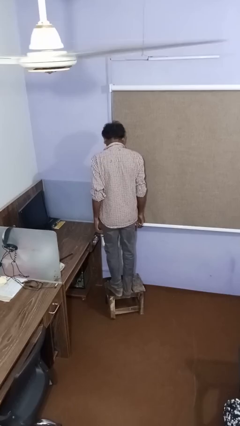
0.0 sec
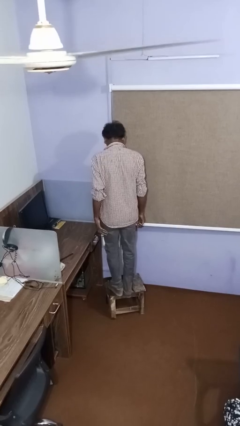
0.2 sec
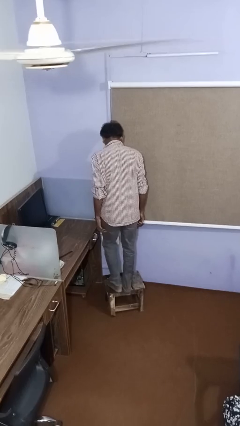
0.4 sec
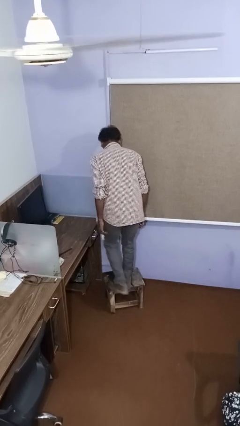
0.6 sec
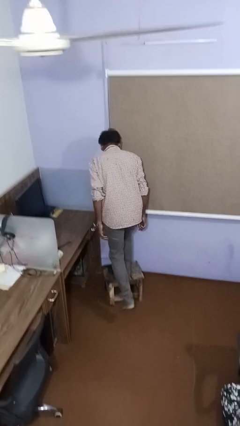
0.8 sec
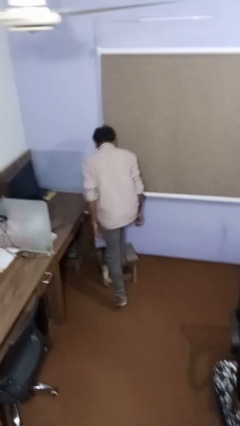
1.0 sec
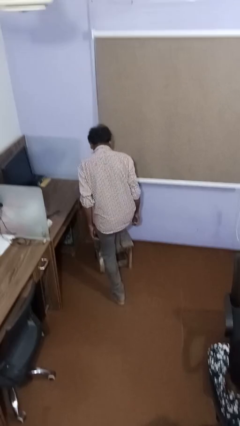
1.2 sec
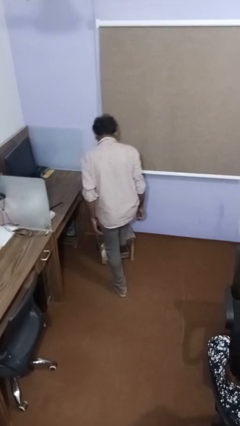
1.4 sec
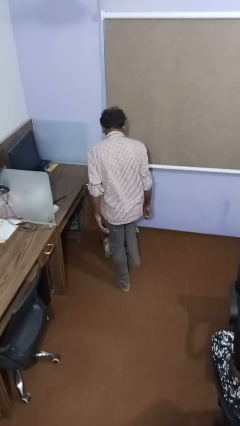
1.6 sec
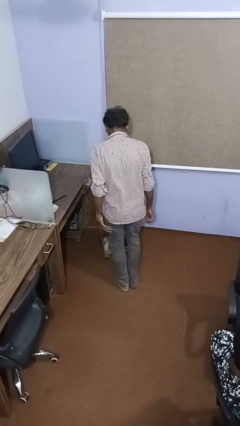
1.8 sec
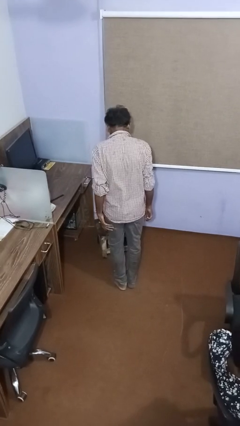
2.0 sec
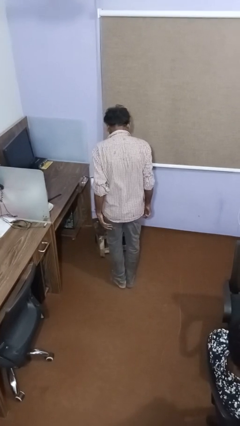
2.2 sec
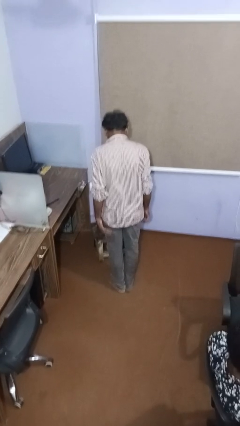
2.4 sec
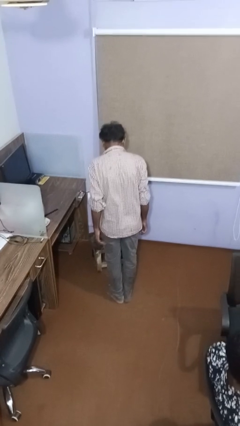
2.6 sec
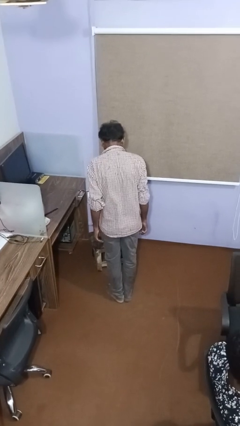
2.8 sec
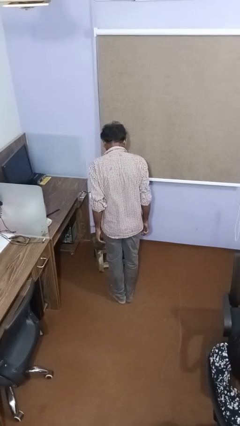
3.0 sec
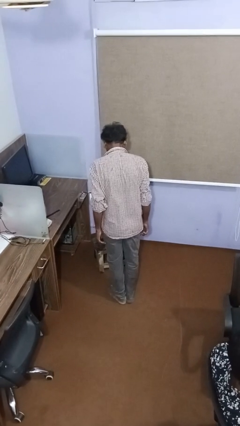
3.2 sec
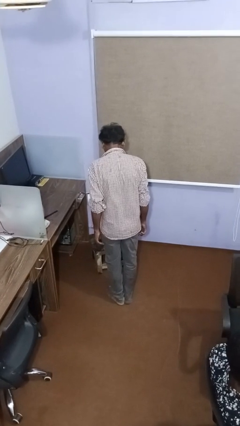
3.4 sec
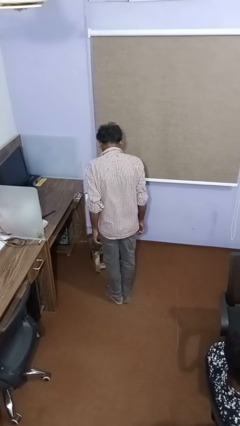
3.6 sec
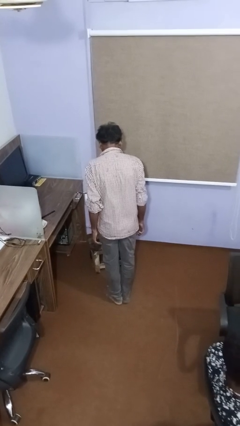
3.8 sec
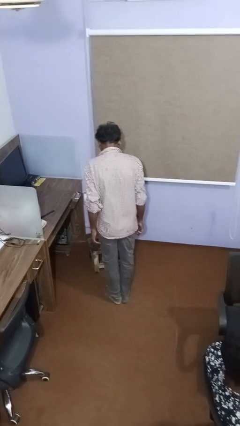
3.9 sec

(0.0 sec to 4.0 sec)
person climbs off table

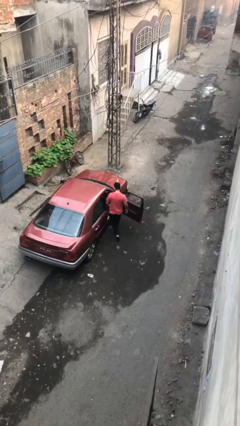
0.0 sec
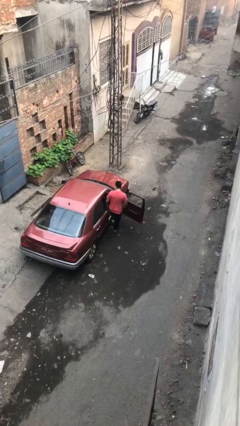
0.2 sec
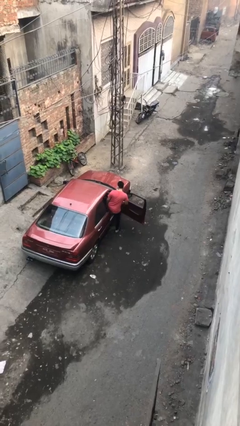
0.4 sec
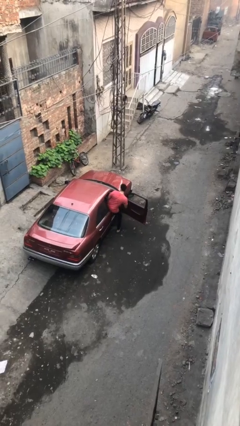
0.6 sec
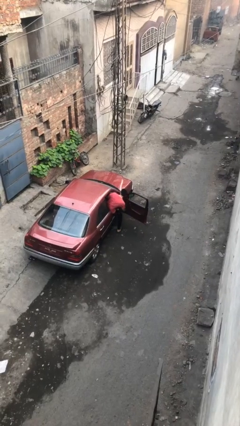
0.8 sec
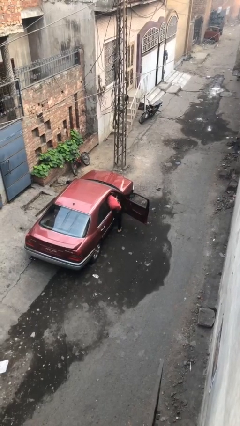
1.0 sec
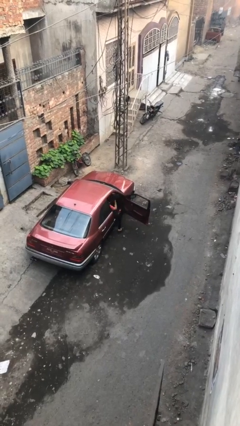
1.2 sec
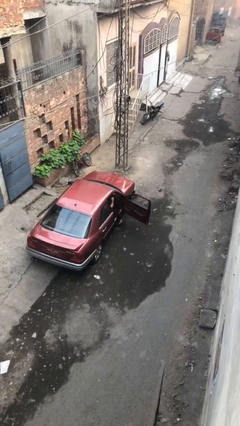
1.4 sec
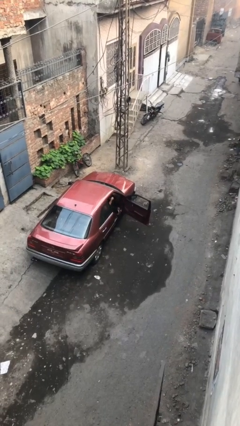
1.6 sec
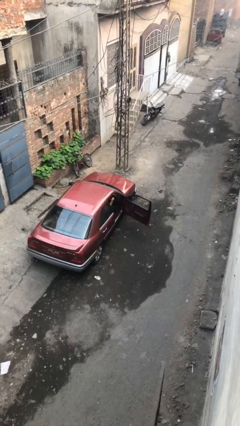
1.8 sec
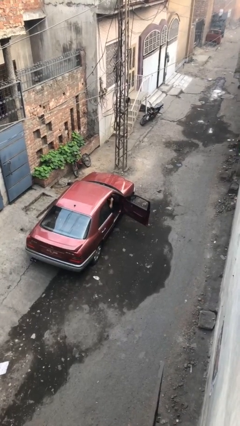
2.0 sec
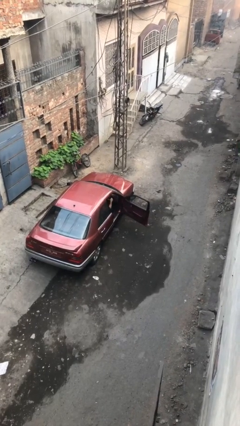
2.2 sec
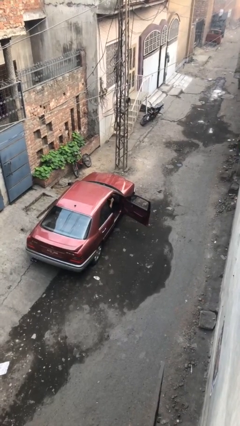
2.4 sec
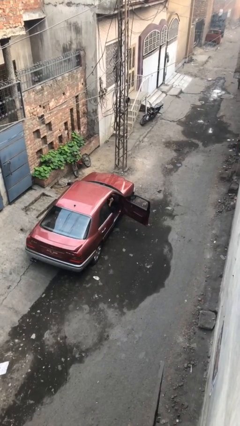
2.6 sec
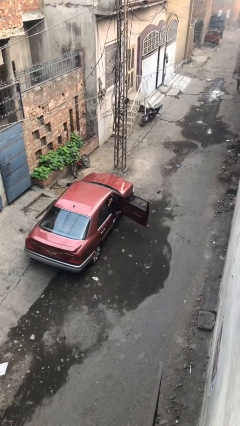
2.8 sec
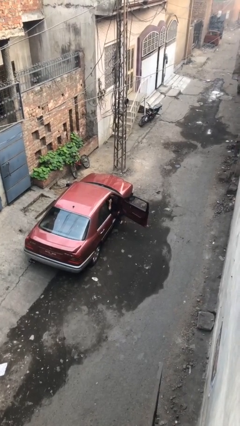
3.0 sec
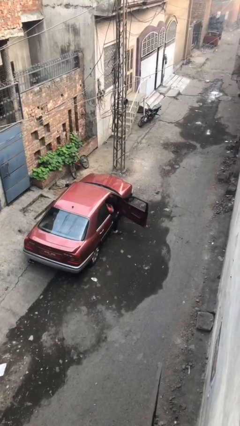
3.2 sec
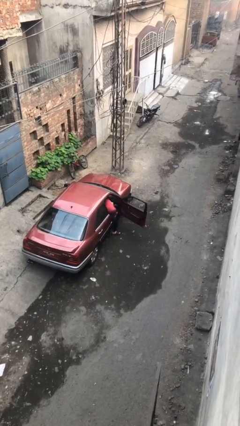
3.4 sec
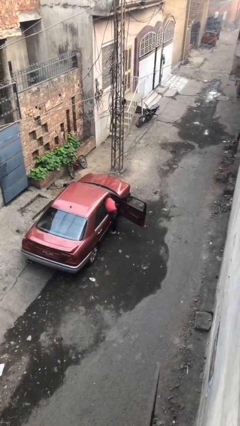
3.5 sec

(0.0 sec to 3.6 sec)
person enters car

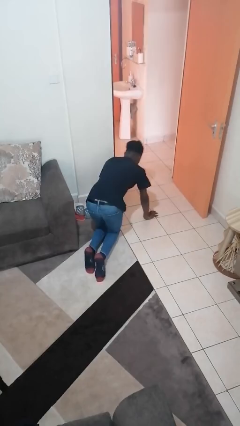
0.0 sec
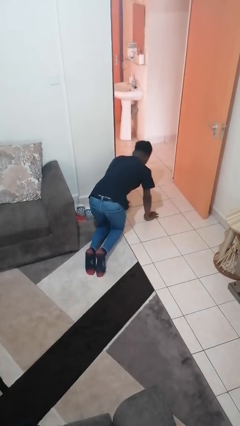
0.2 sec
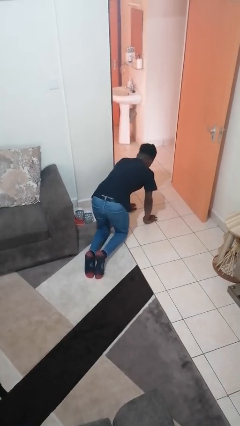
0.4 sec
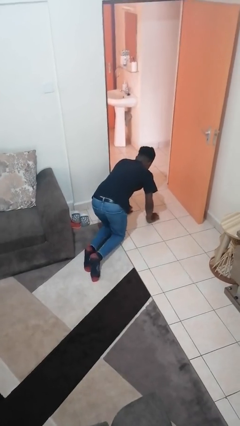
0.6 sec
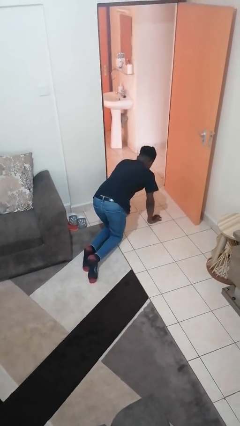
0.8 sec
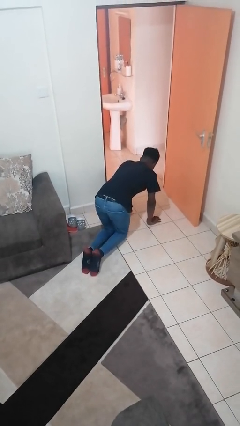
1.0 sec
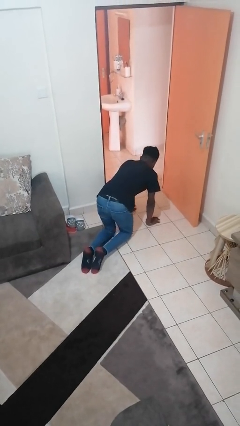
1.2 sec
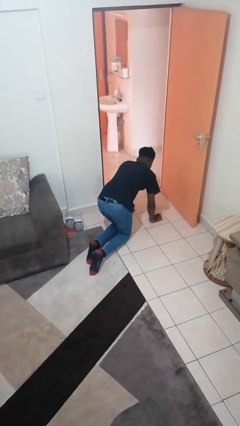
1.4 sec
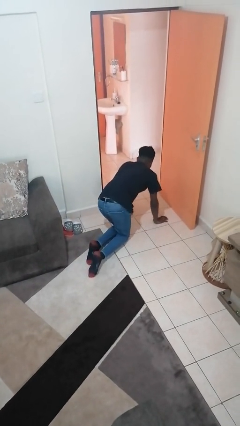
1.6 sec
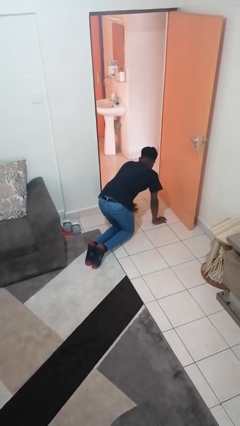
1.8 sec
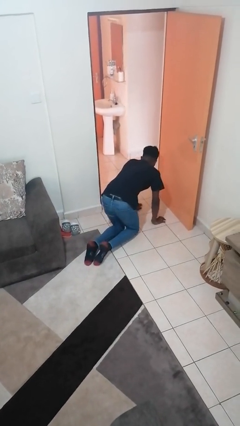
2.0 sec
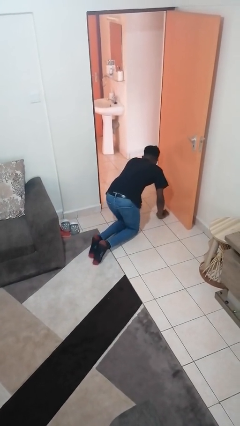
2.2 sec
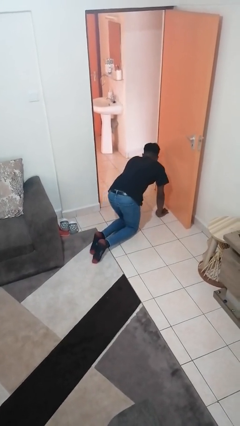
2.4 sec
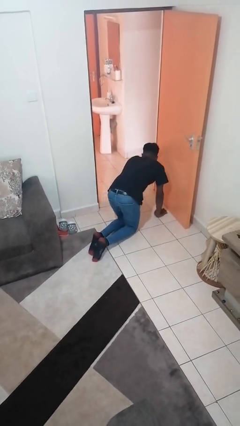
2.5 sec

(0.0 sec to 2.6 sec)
person crawls

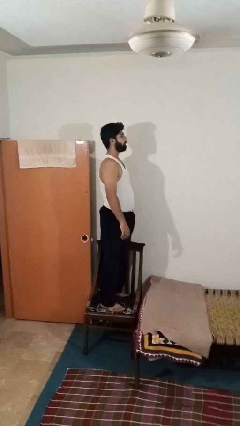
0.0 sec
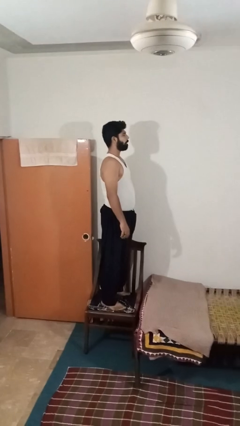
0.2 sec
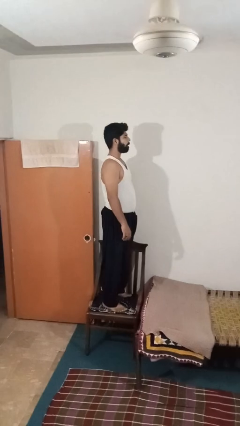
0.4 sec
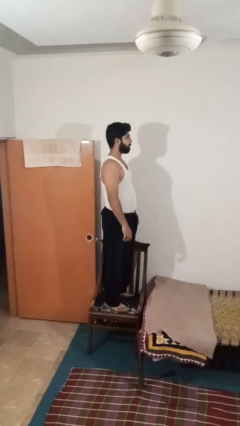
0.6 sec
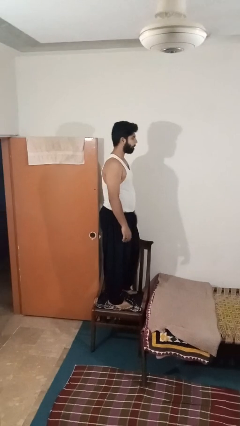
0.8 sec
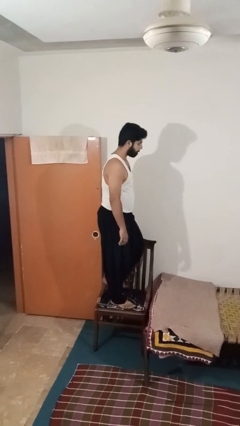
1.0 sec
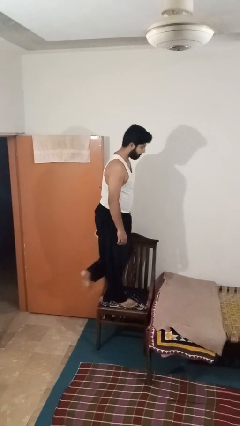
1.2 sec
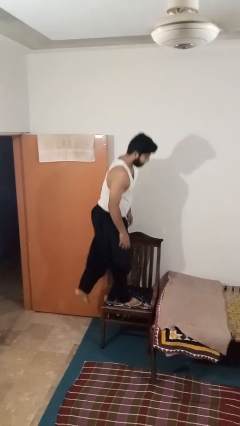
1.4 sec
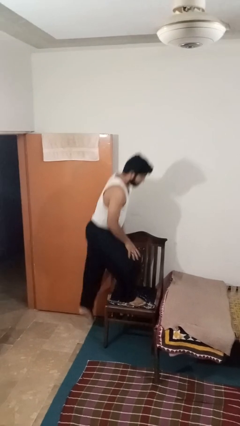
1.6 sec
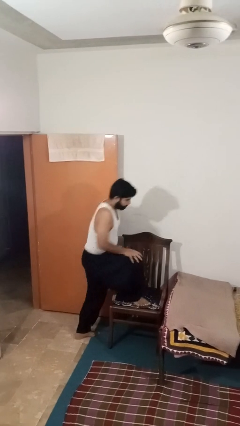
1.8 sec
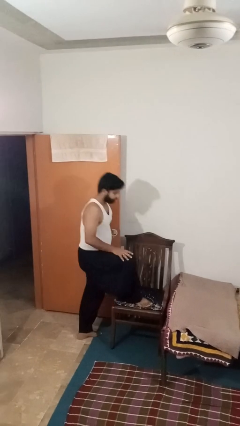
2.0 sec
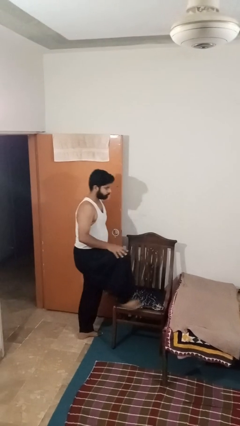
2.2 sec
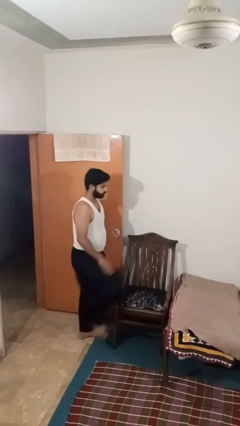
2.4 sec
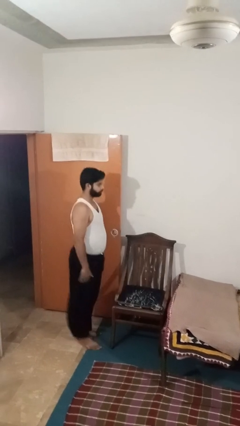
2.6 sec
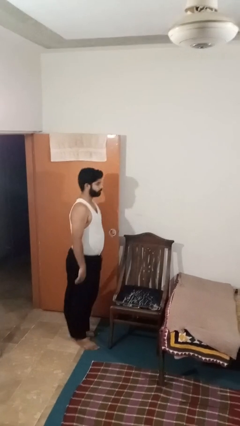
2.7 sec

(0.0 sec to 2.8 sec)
person climbs off chair

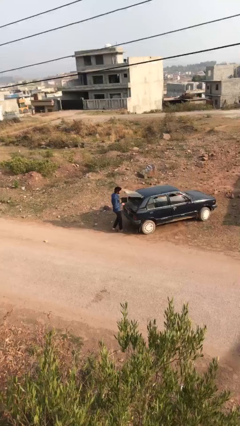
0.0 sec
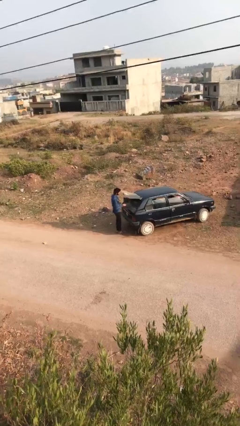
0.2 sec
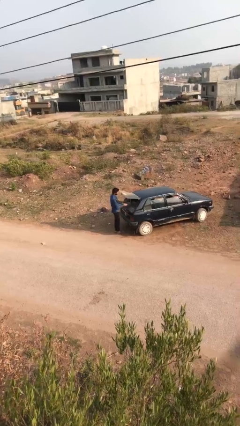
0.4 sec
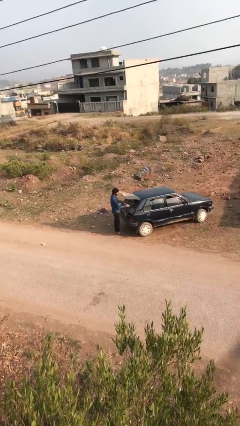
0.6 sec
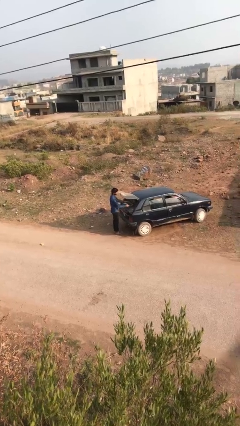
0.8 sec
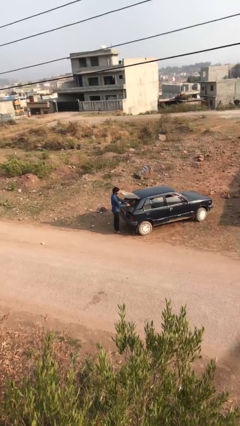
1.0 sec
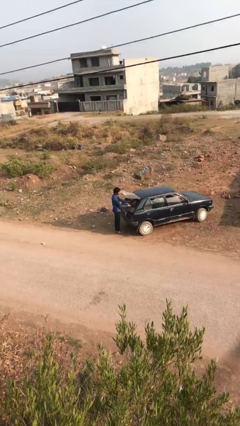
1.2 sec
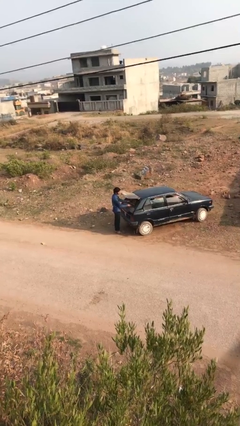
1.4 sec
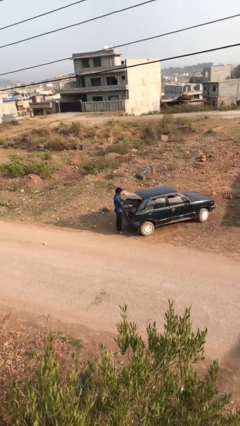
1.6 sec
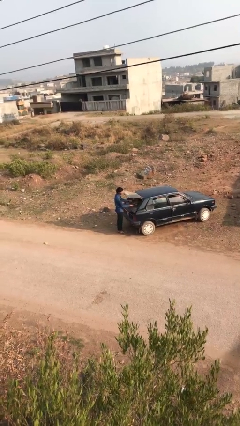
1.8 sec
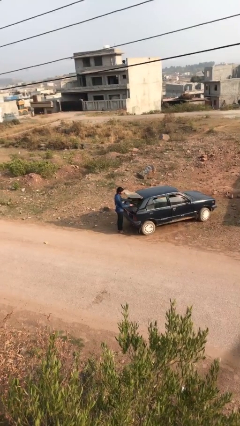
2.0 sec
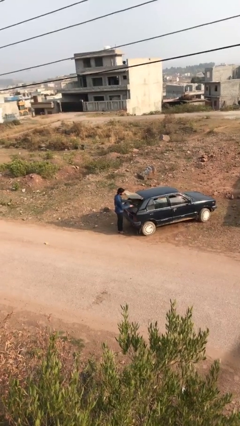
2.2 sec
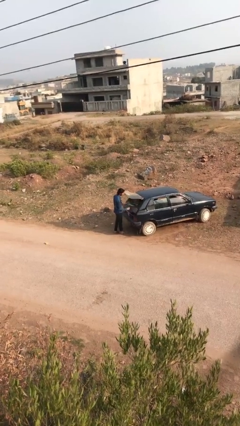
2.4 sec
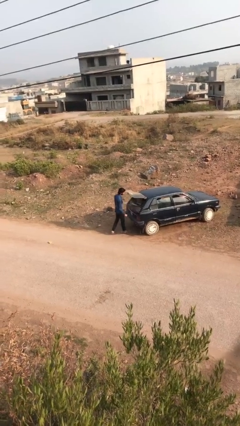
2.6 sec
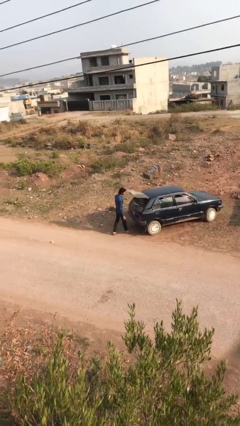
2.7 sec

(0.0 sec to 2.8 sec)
person loads car

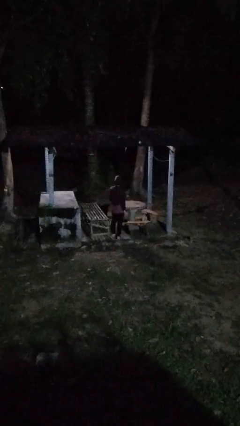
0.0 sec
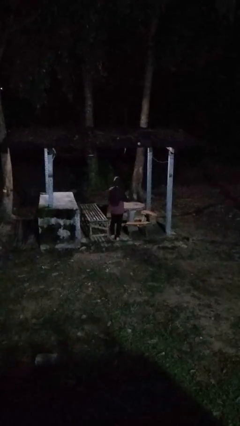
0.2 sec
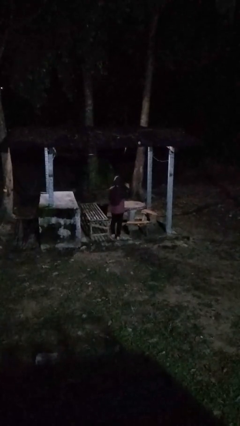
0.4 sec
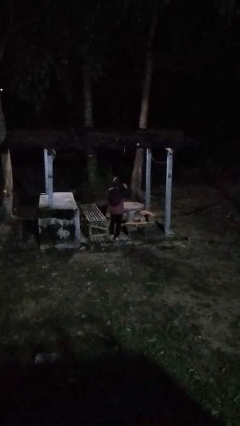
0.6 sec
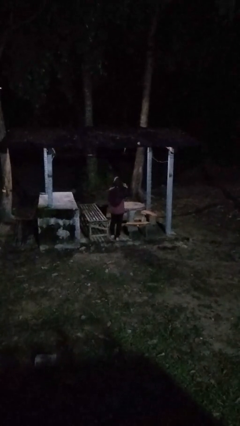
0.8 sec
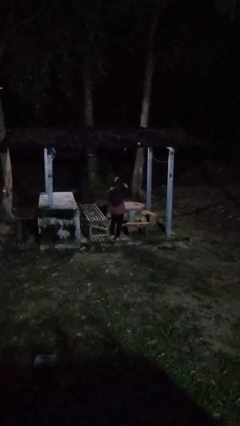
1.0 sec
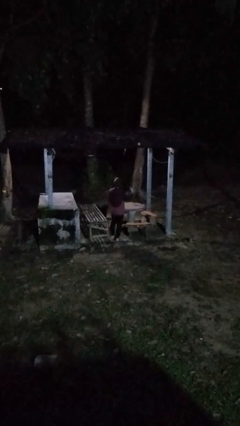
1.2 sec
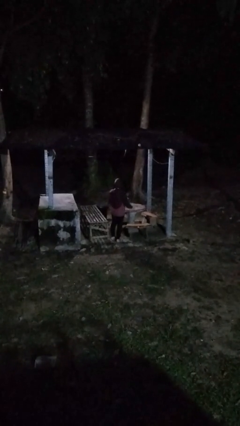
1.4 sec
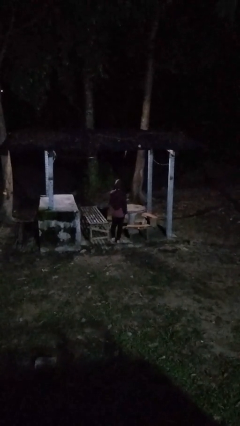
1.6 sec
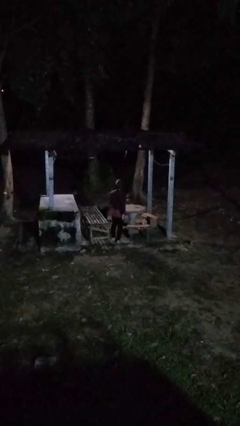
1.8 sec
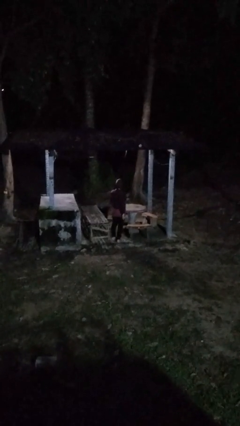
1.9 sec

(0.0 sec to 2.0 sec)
person gestures listen closely
